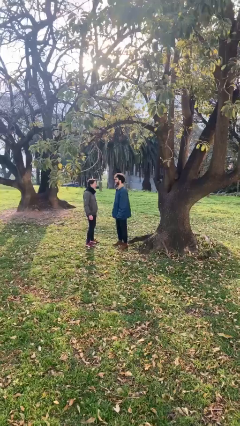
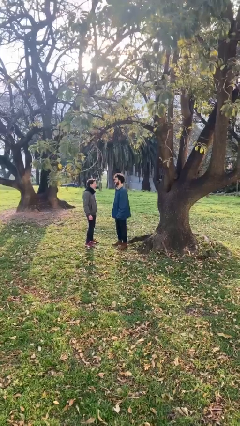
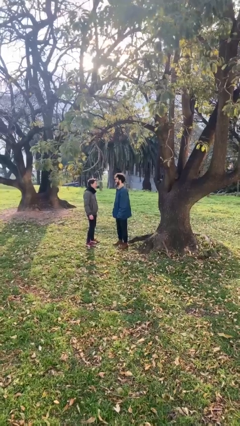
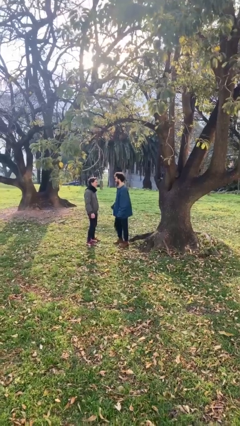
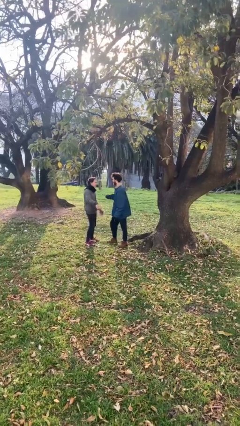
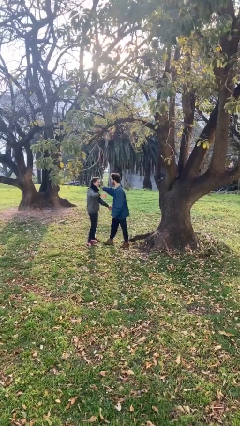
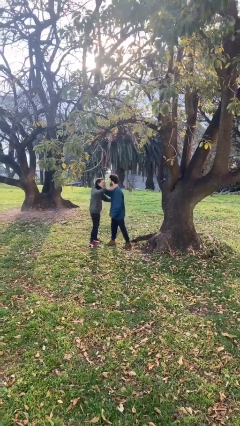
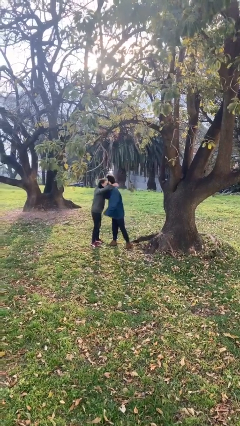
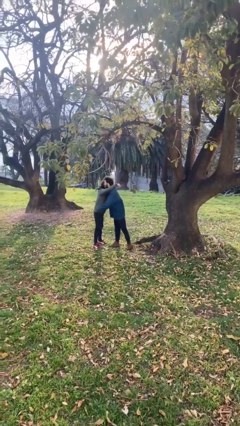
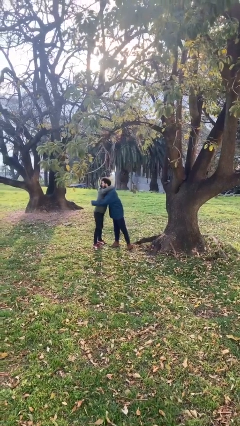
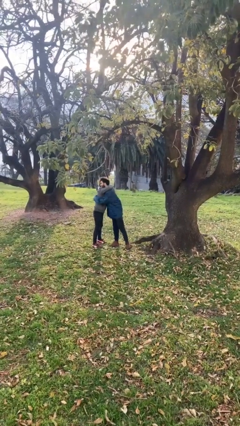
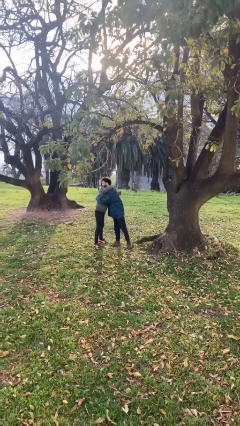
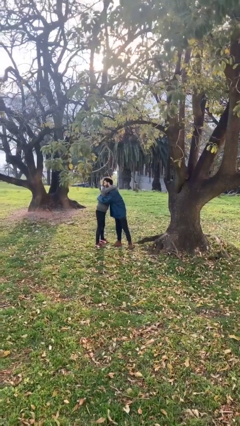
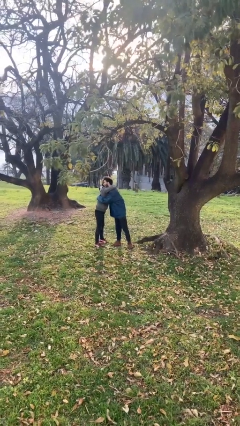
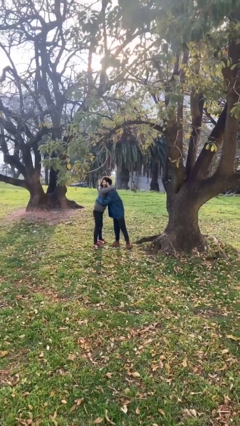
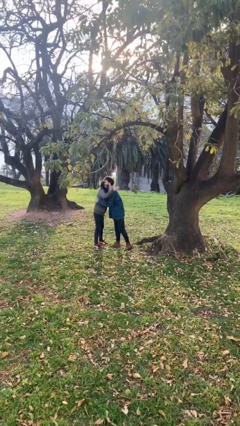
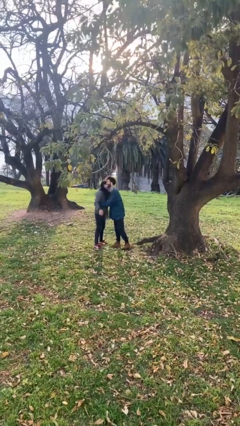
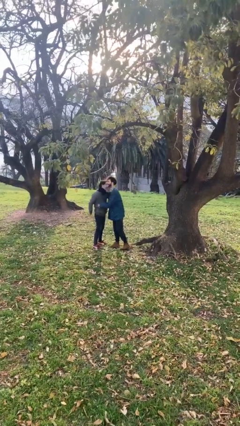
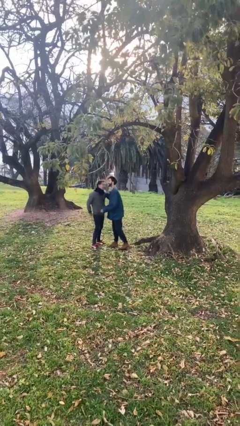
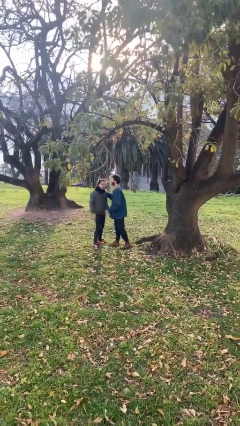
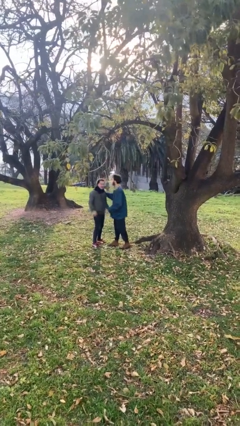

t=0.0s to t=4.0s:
person embraces person

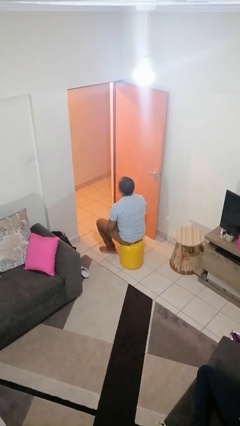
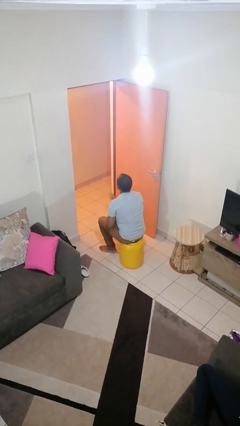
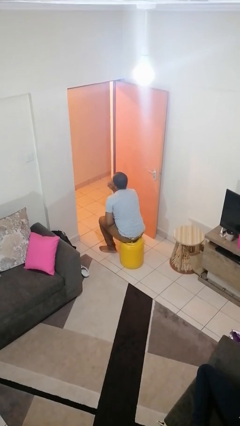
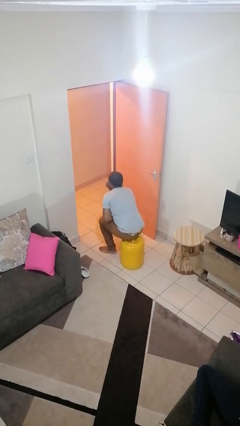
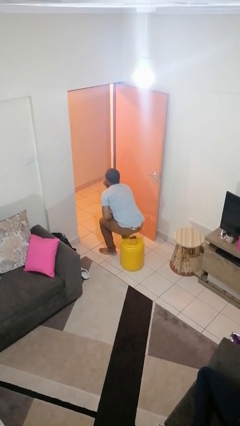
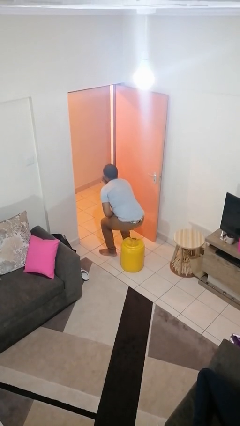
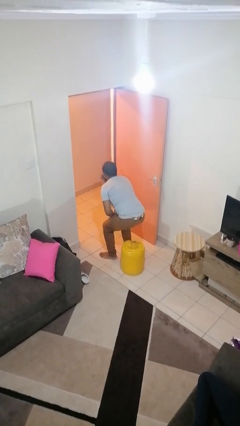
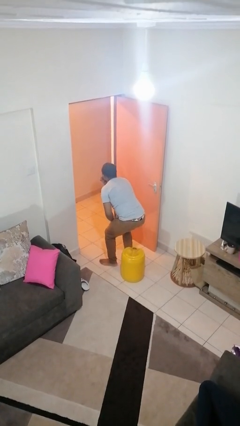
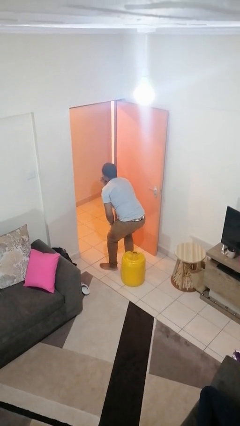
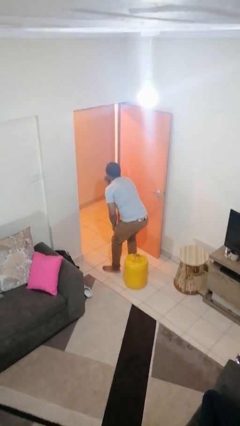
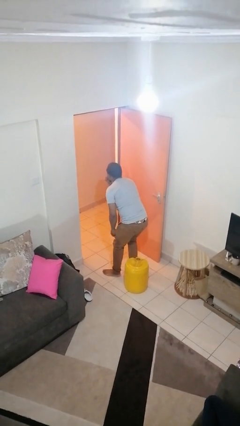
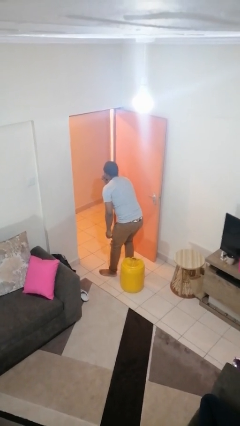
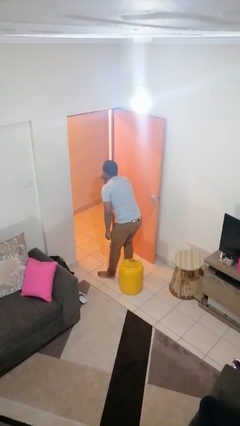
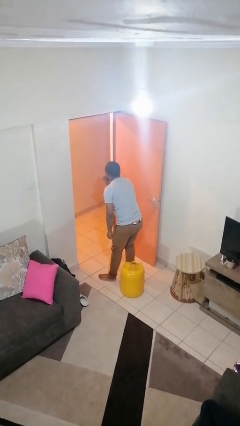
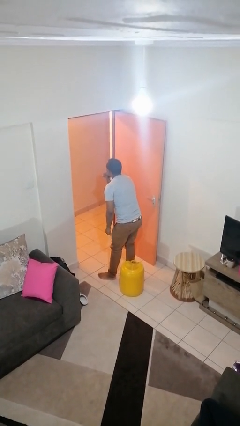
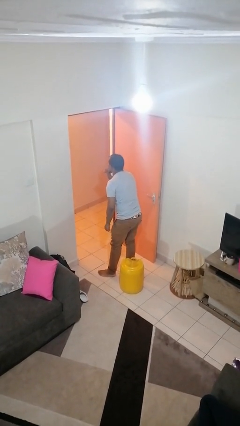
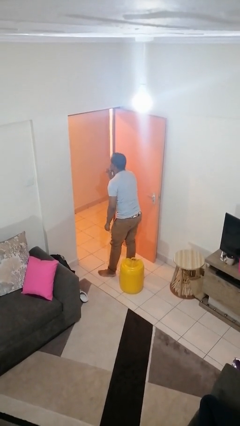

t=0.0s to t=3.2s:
person gestures be quiet

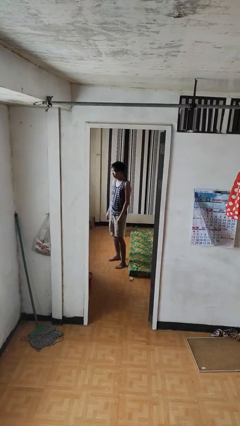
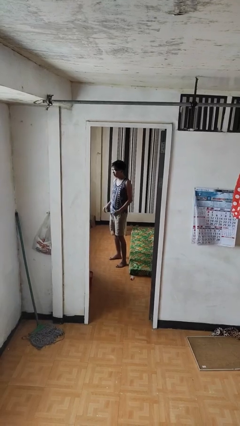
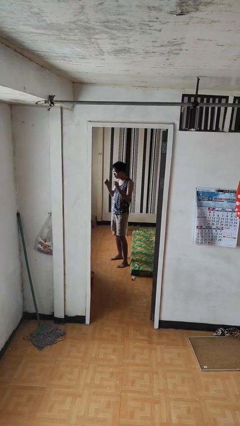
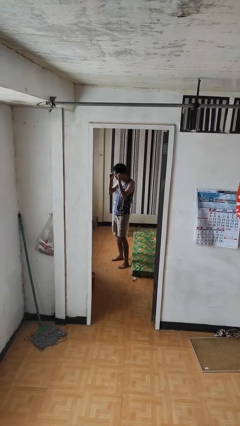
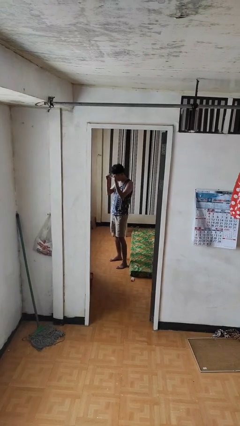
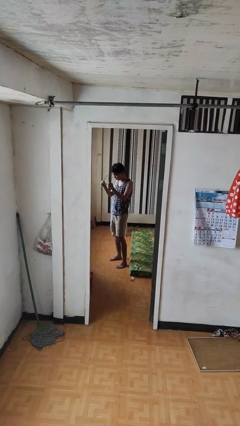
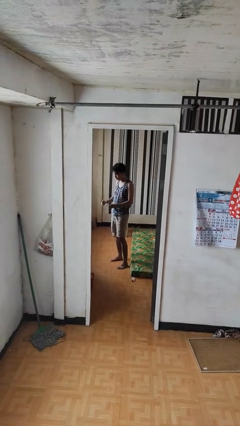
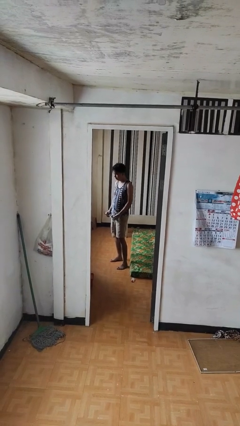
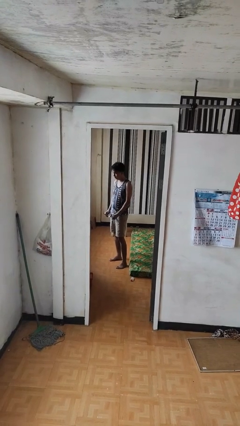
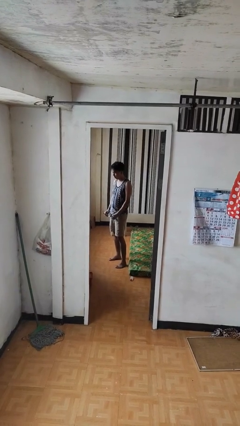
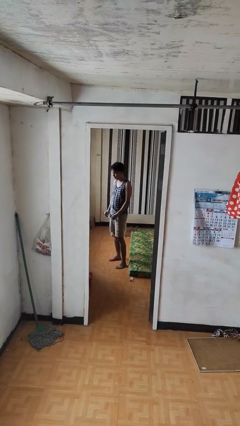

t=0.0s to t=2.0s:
person takes off glasses

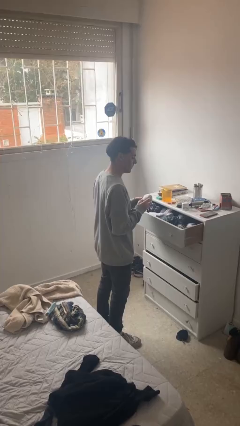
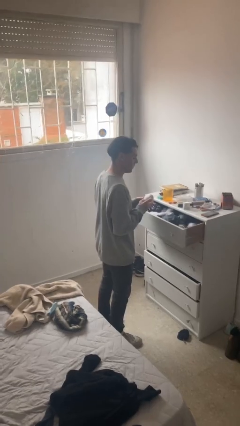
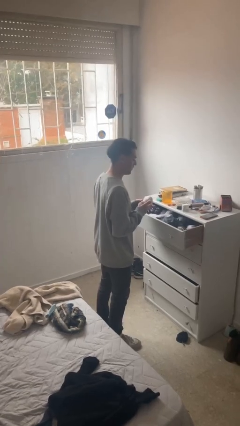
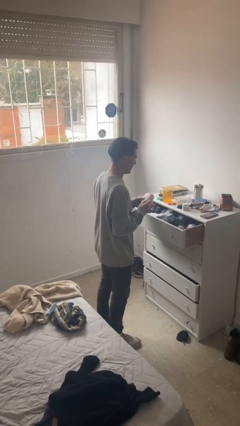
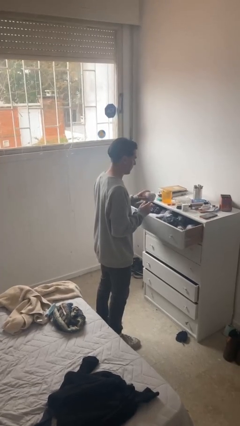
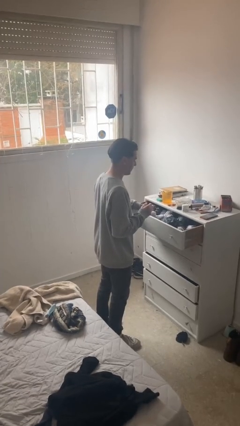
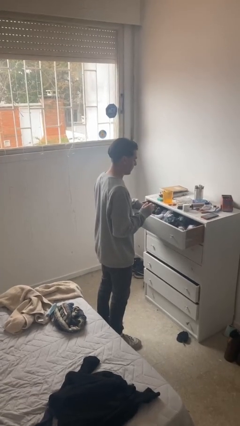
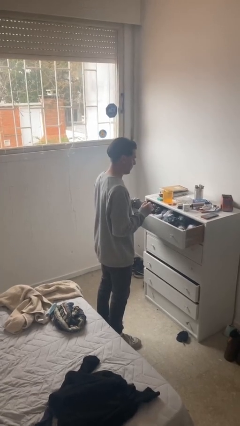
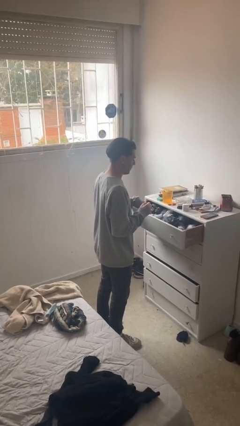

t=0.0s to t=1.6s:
person puts clothes into dresser

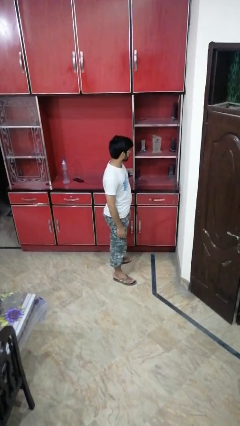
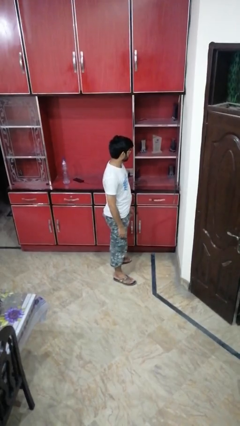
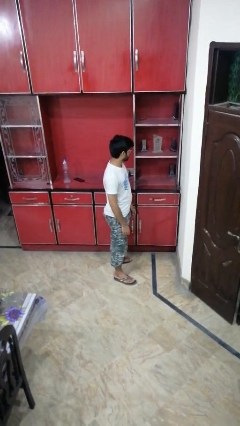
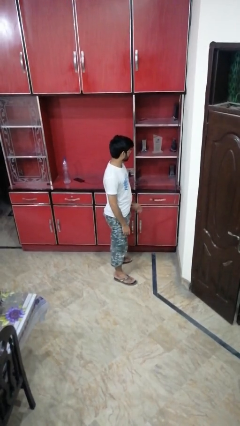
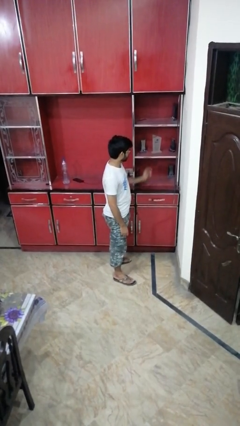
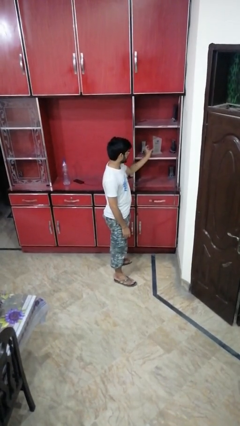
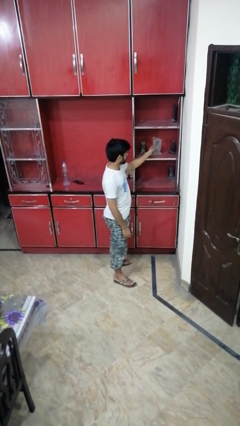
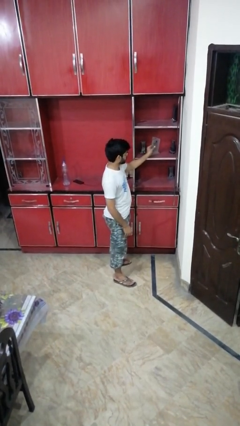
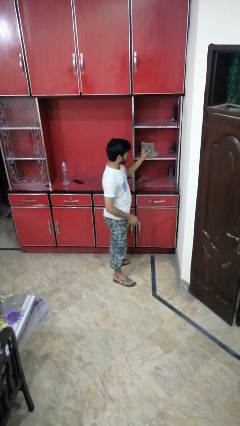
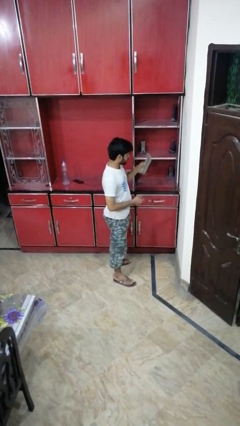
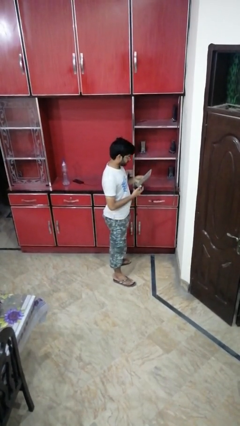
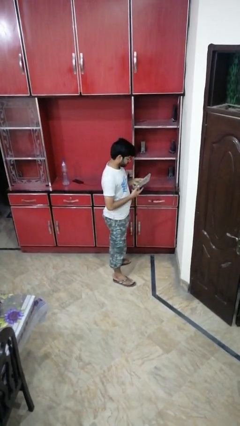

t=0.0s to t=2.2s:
person picks up object from cabinet

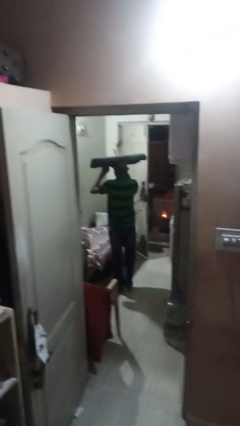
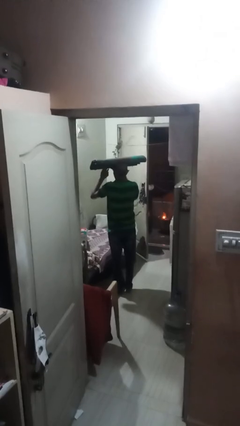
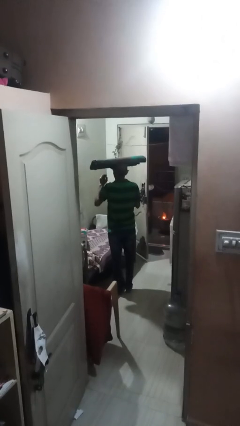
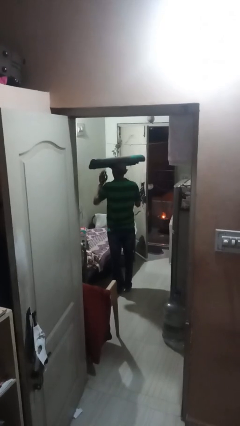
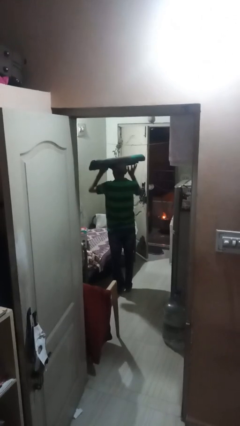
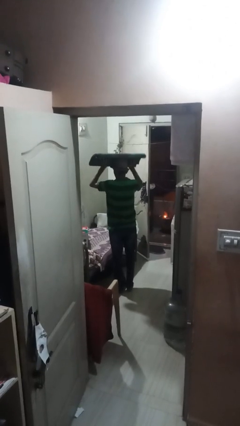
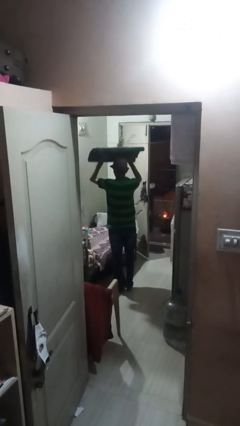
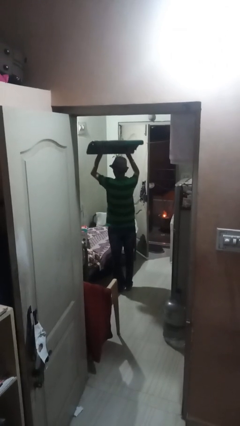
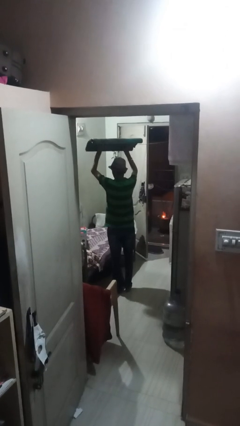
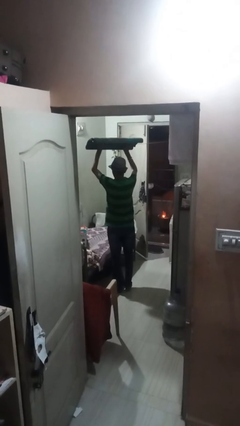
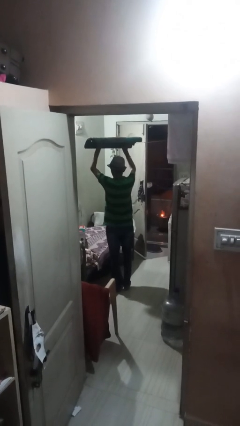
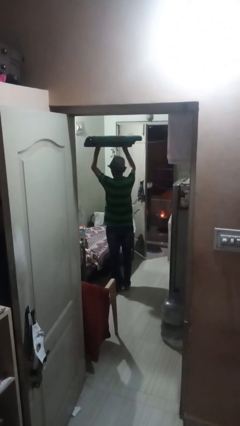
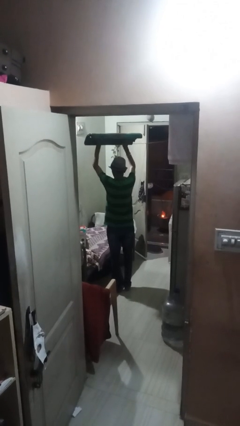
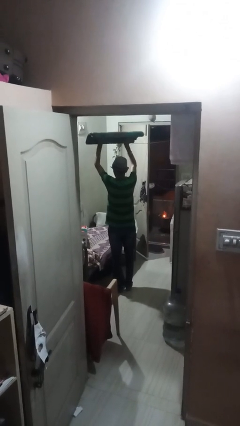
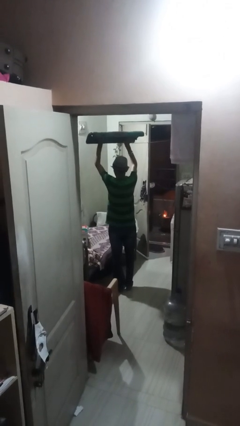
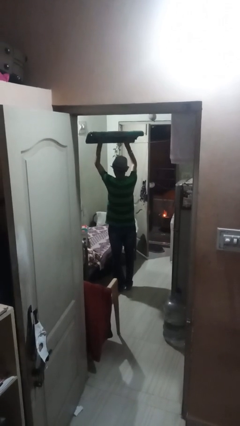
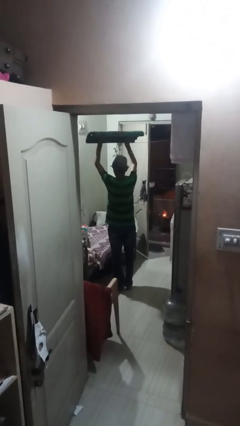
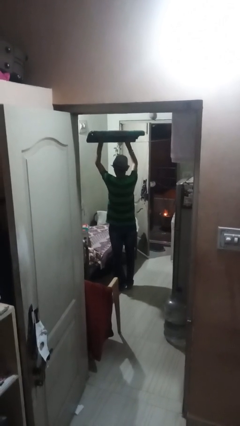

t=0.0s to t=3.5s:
person holds object above head

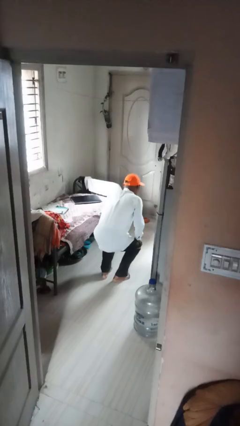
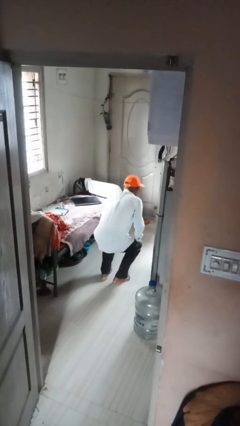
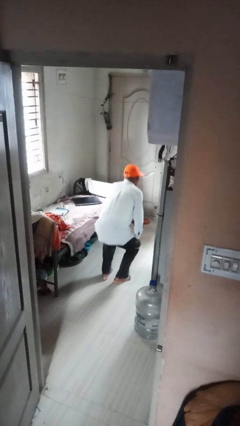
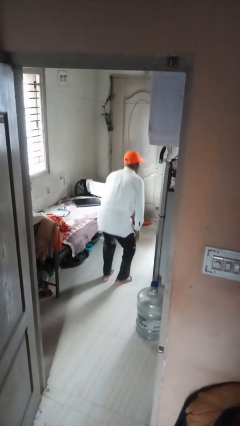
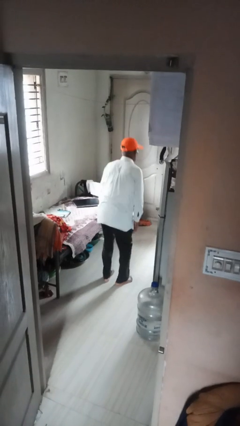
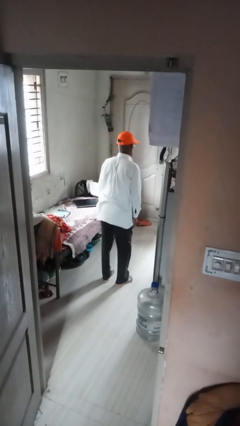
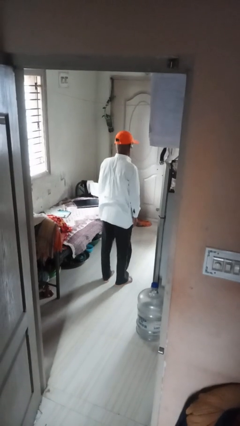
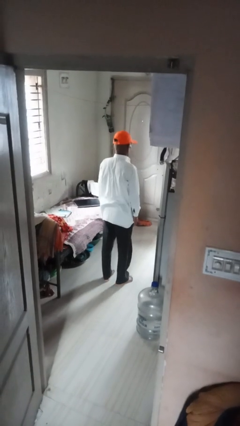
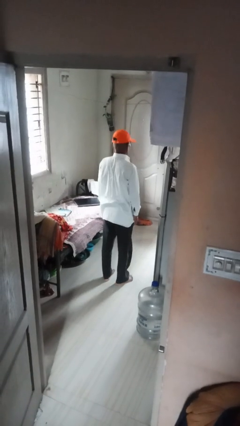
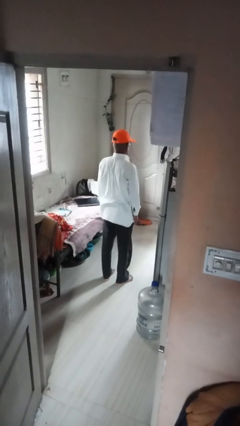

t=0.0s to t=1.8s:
person stands up
